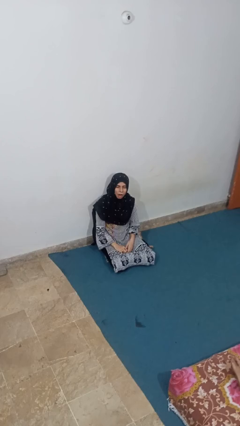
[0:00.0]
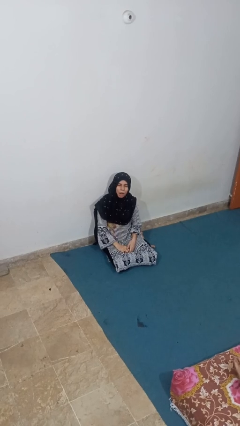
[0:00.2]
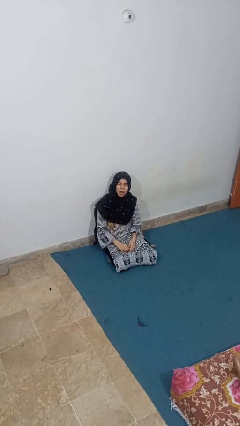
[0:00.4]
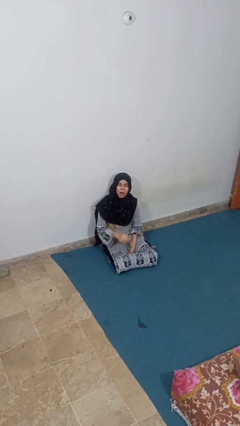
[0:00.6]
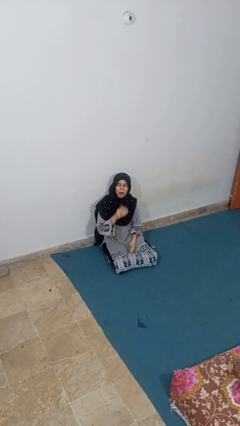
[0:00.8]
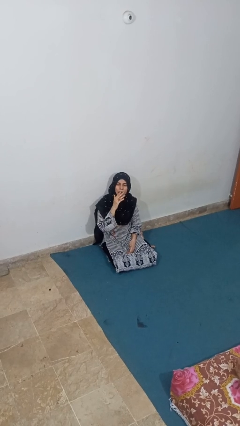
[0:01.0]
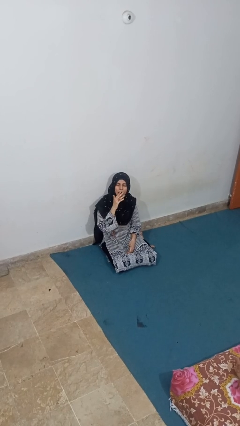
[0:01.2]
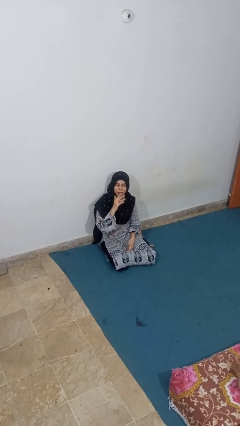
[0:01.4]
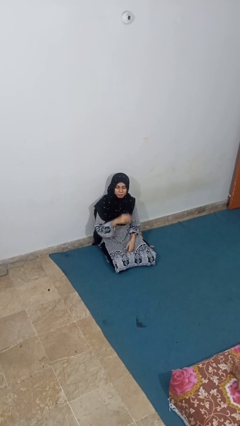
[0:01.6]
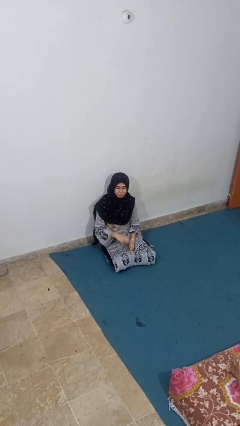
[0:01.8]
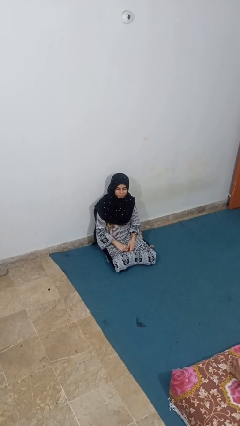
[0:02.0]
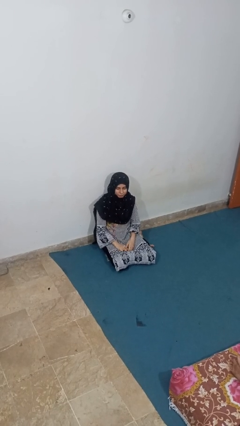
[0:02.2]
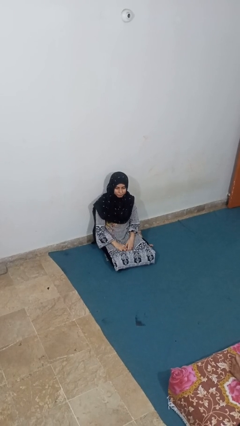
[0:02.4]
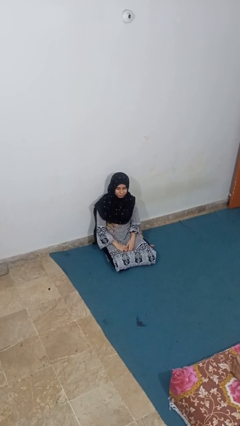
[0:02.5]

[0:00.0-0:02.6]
person yawns

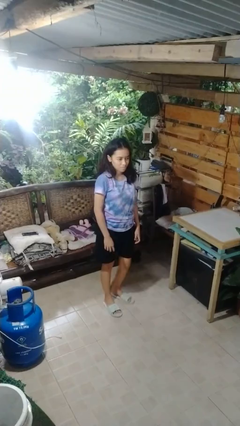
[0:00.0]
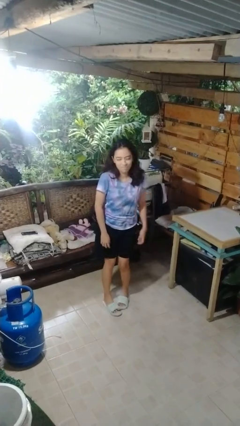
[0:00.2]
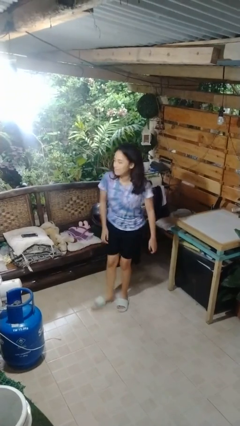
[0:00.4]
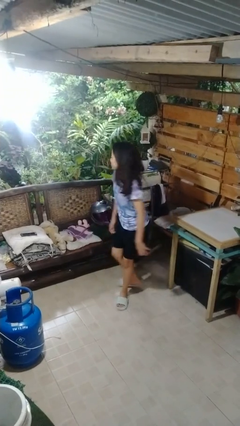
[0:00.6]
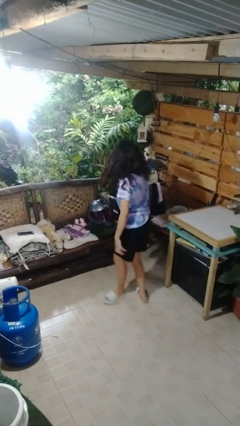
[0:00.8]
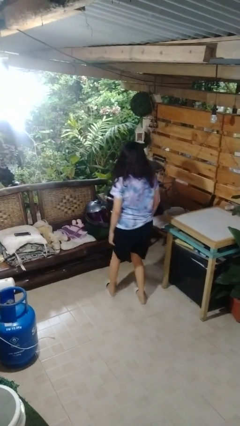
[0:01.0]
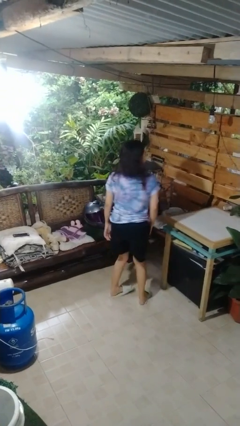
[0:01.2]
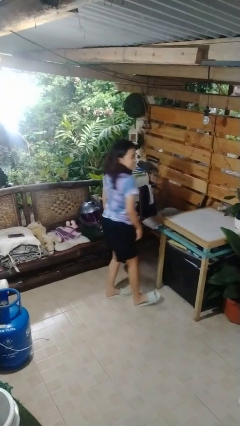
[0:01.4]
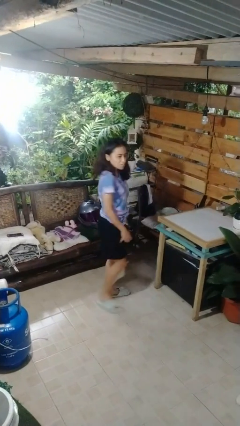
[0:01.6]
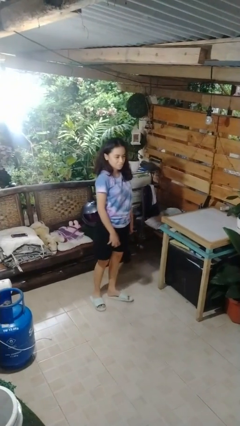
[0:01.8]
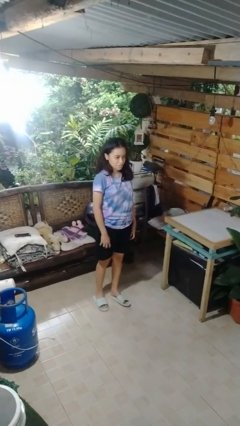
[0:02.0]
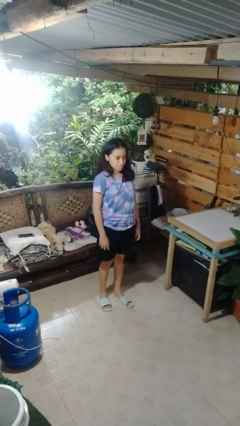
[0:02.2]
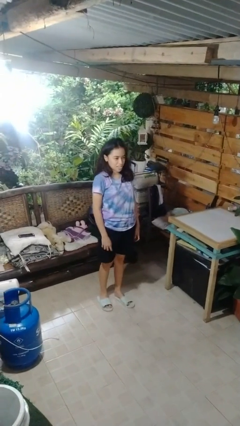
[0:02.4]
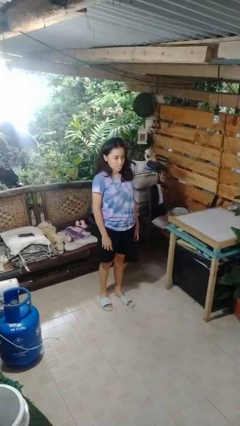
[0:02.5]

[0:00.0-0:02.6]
person twirls

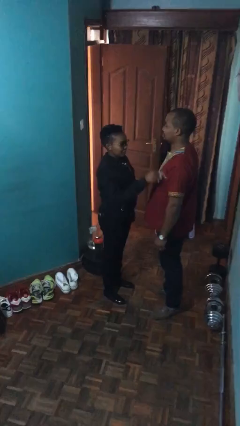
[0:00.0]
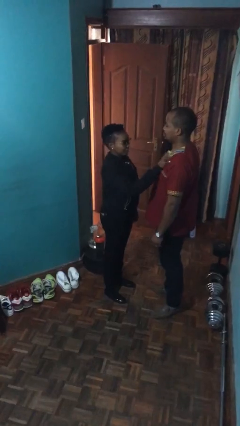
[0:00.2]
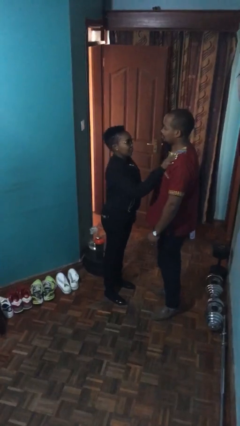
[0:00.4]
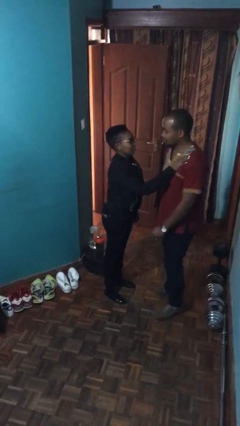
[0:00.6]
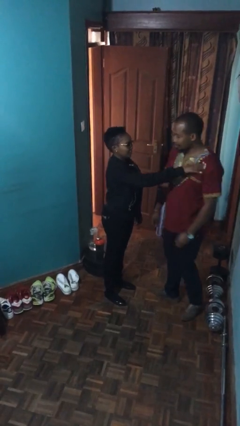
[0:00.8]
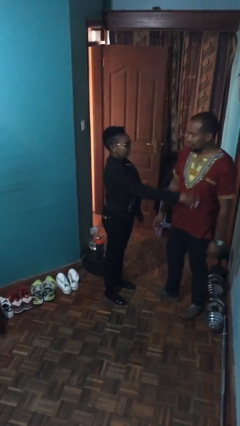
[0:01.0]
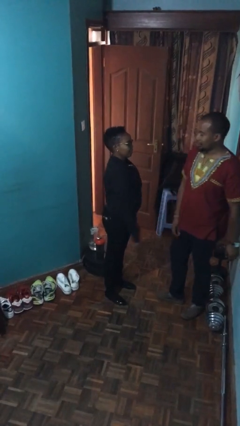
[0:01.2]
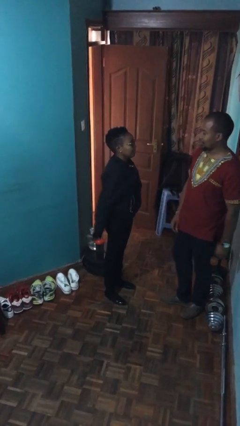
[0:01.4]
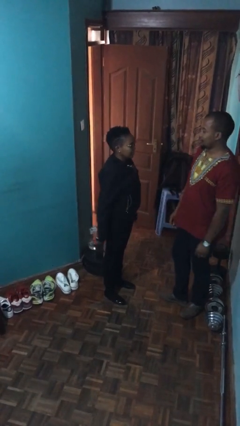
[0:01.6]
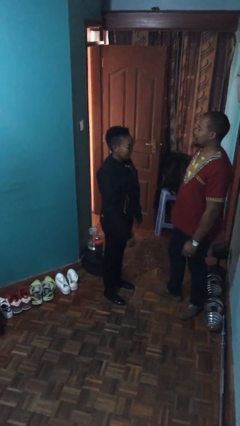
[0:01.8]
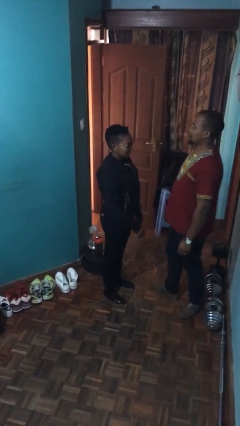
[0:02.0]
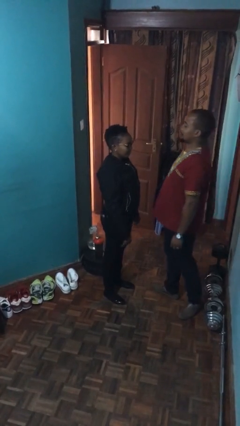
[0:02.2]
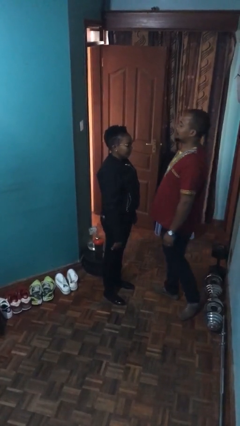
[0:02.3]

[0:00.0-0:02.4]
person shoves person

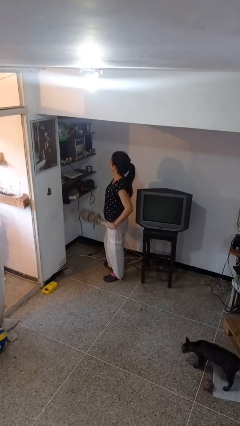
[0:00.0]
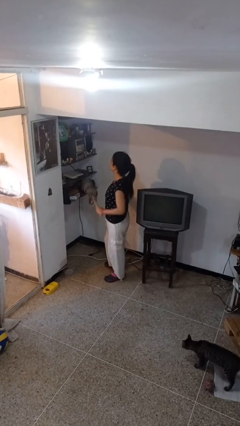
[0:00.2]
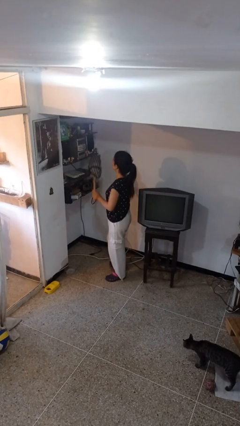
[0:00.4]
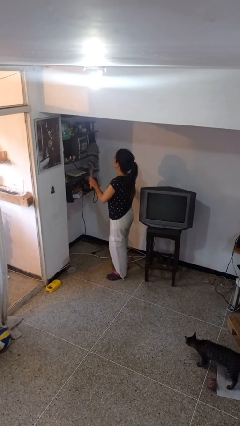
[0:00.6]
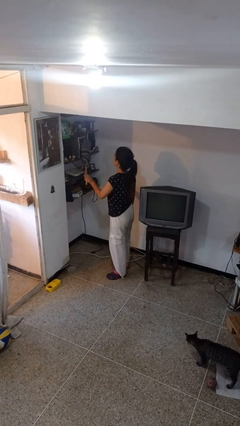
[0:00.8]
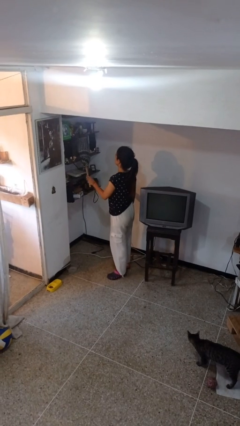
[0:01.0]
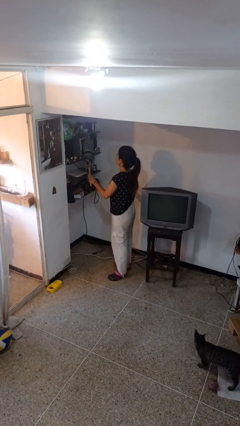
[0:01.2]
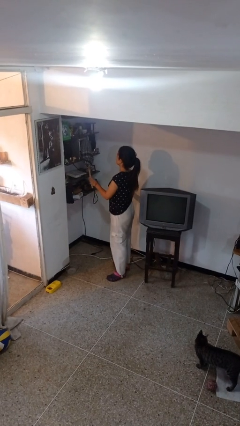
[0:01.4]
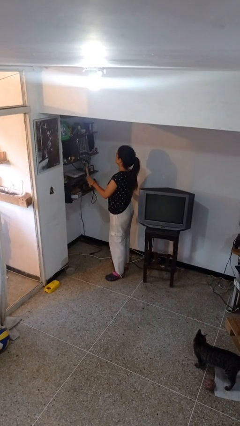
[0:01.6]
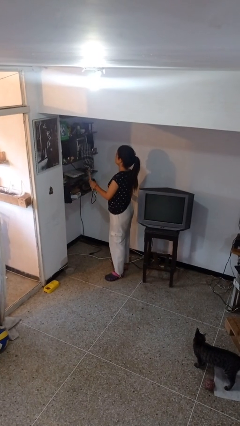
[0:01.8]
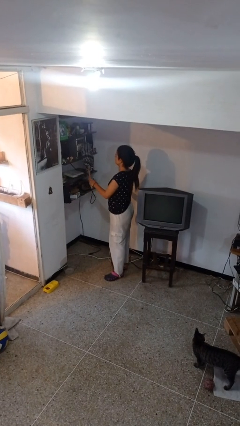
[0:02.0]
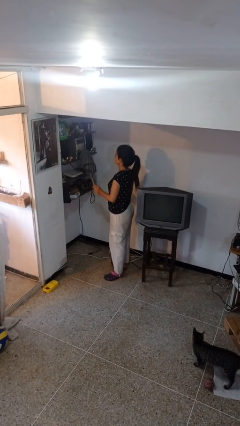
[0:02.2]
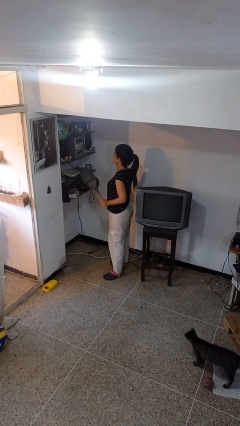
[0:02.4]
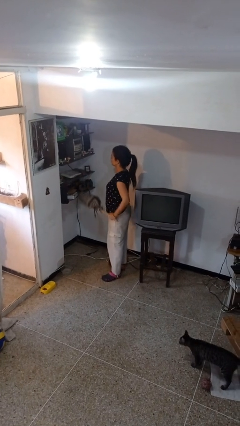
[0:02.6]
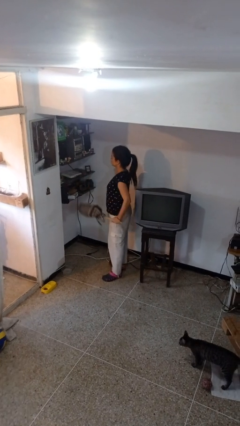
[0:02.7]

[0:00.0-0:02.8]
person dusts furniture

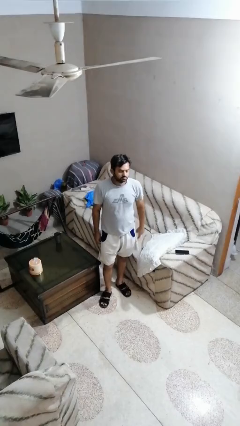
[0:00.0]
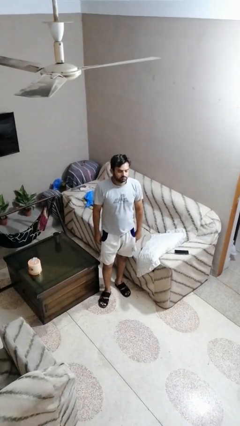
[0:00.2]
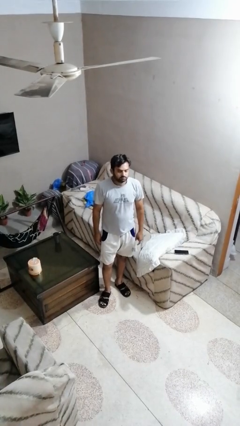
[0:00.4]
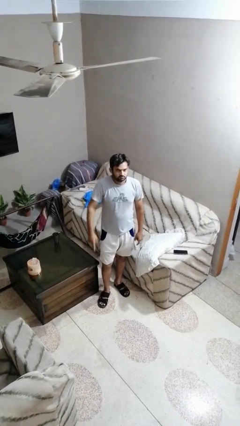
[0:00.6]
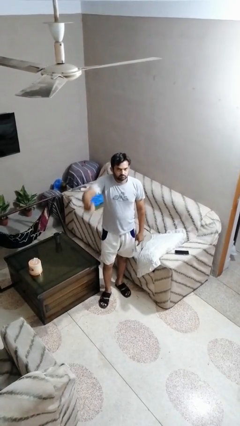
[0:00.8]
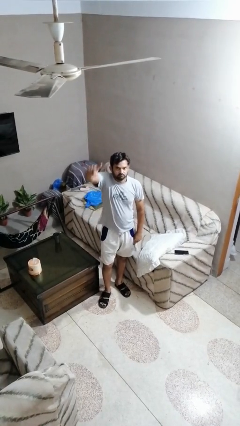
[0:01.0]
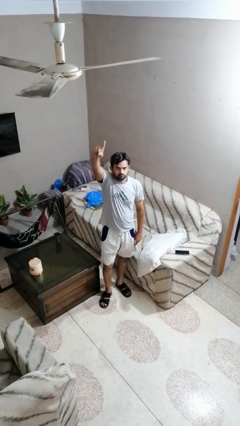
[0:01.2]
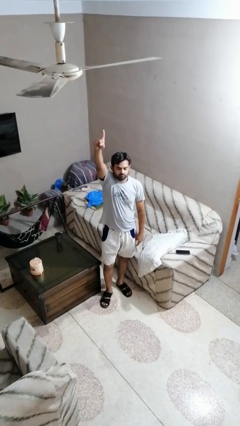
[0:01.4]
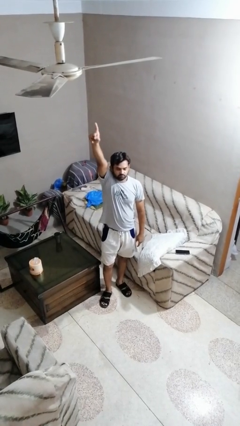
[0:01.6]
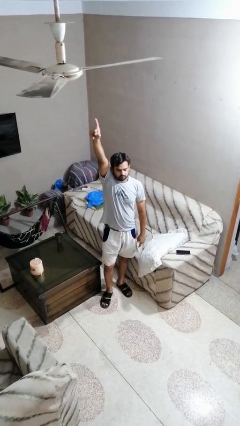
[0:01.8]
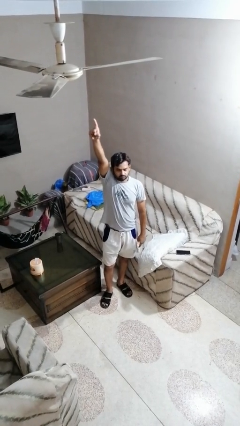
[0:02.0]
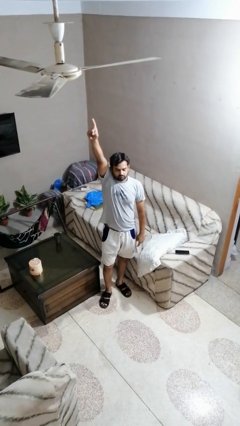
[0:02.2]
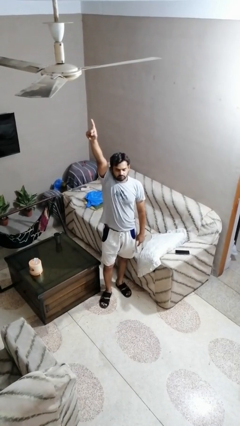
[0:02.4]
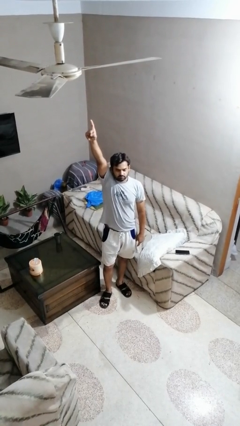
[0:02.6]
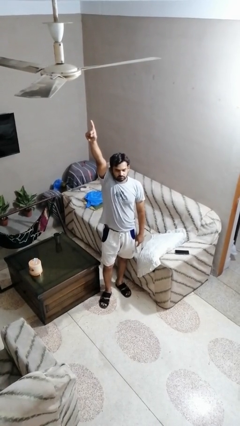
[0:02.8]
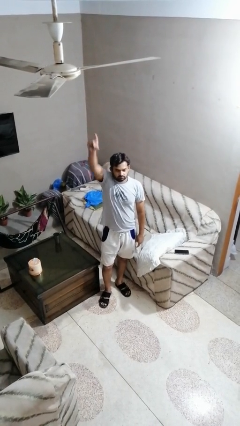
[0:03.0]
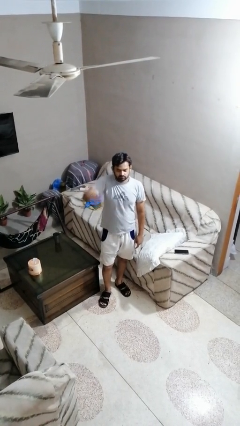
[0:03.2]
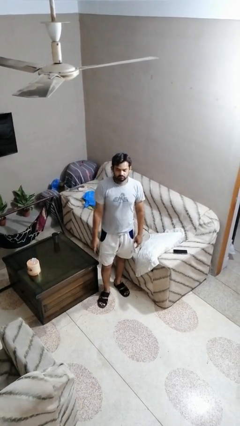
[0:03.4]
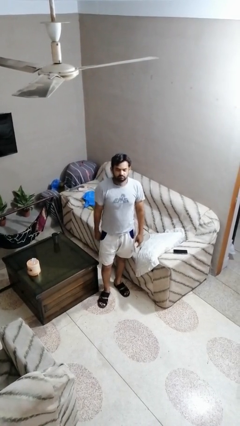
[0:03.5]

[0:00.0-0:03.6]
person gestures number one

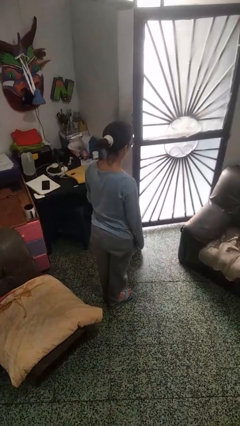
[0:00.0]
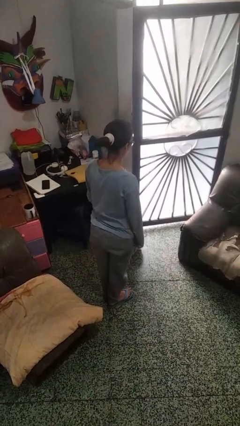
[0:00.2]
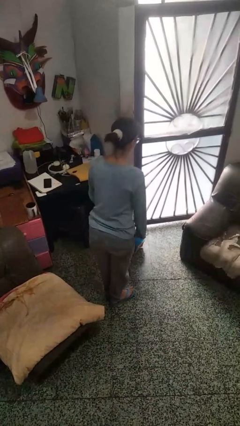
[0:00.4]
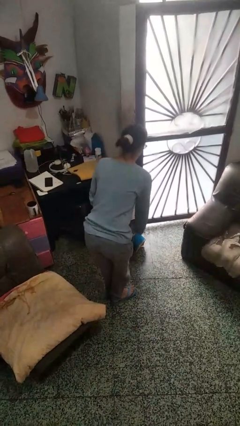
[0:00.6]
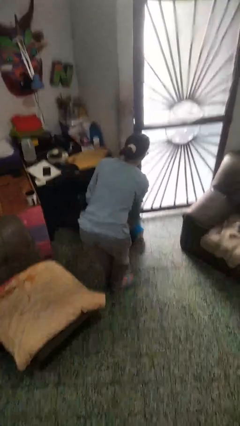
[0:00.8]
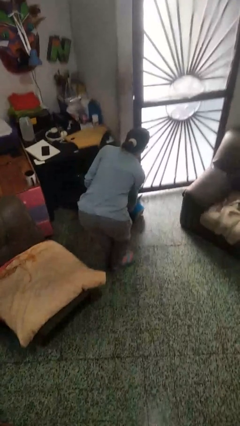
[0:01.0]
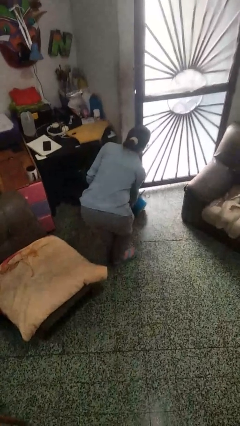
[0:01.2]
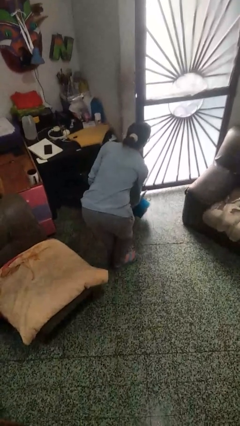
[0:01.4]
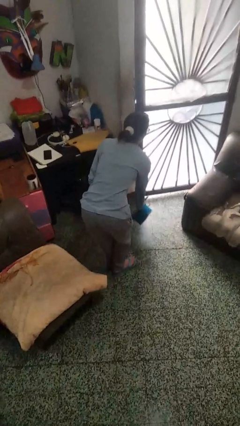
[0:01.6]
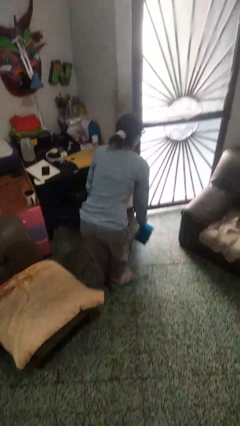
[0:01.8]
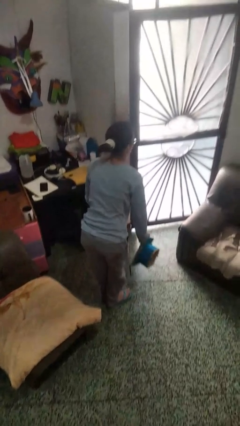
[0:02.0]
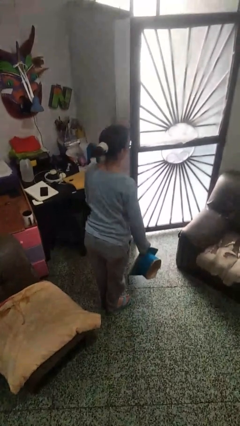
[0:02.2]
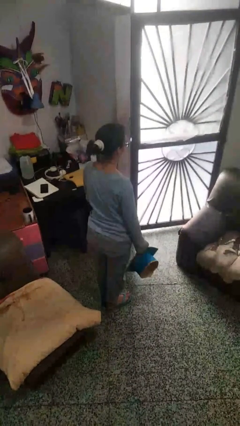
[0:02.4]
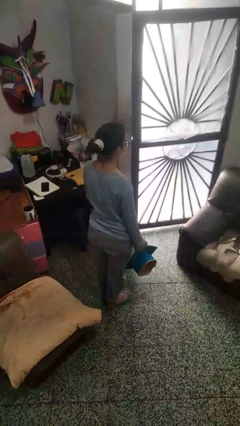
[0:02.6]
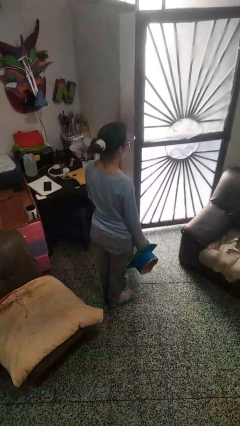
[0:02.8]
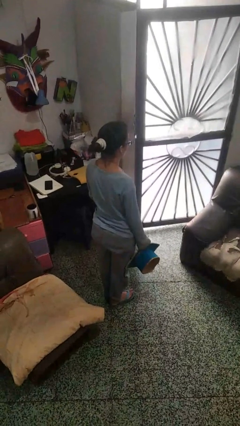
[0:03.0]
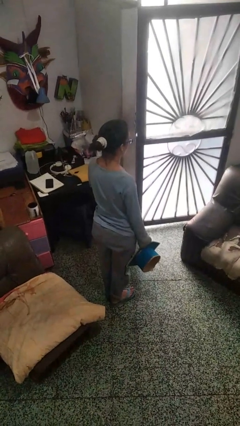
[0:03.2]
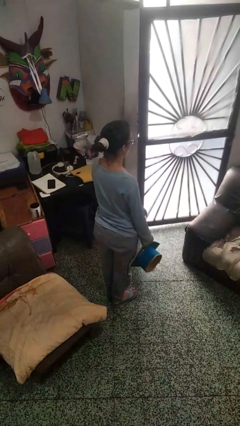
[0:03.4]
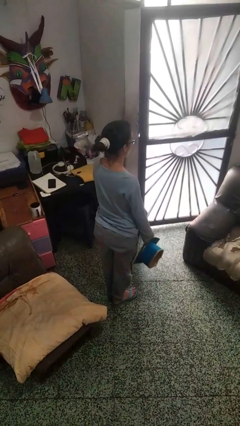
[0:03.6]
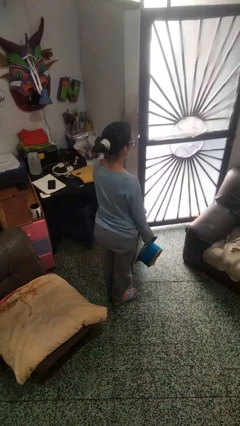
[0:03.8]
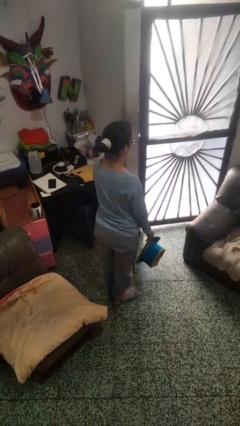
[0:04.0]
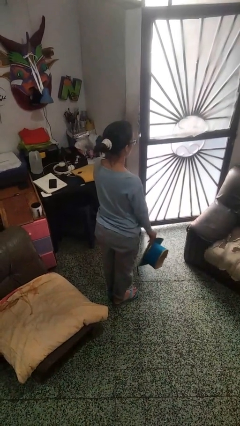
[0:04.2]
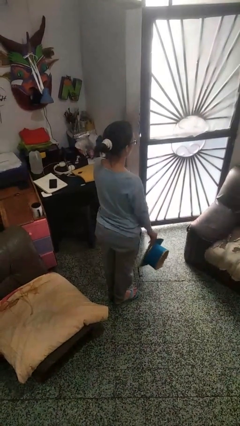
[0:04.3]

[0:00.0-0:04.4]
person picks up object from floor
